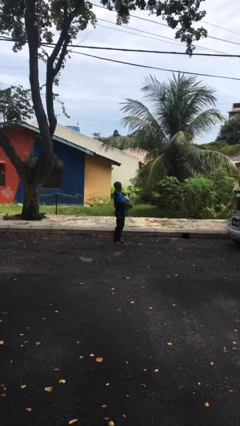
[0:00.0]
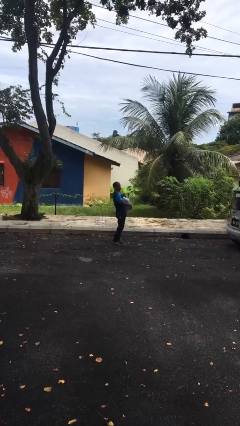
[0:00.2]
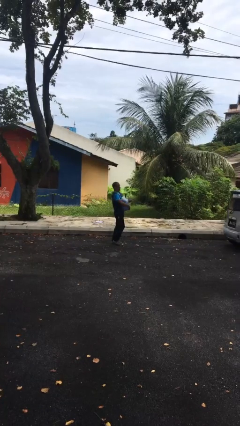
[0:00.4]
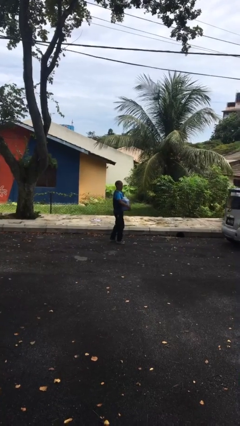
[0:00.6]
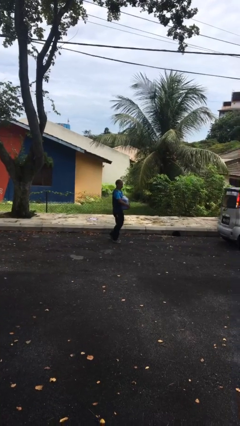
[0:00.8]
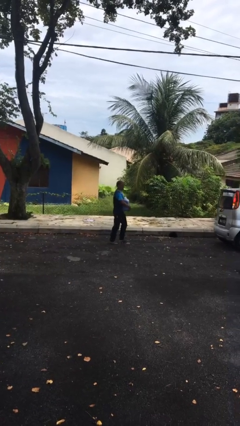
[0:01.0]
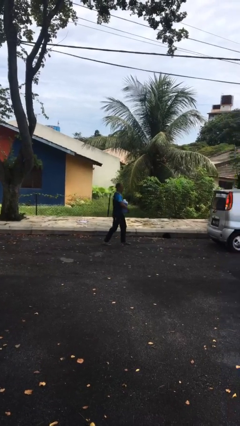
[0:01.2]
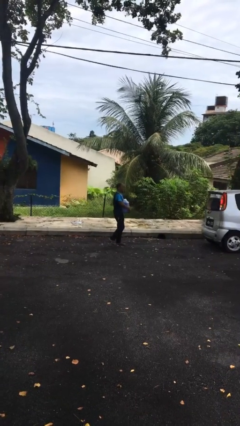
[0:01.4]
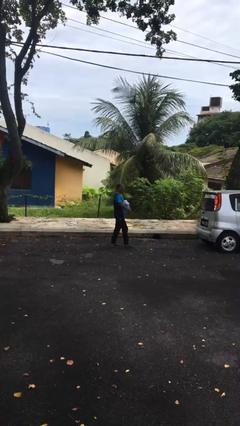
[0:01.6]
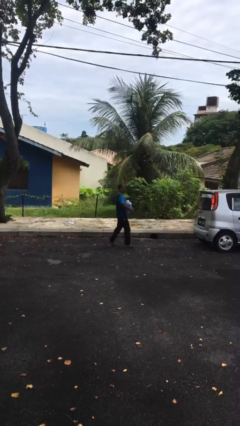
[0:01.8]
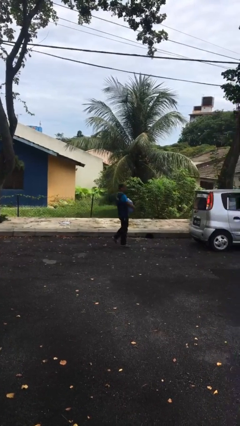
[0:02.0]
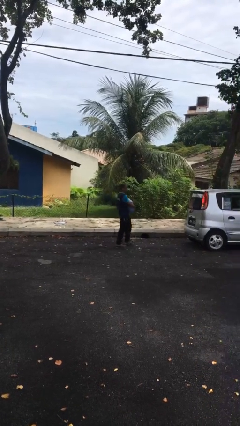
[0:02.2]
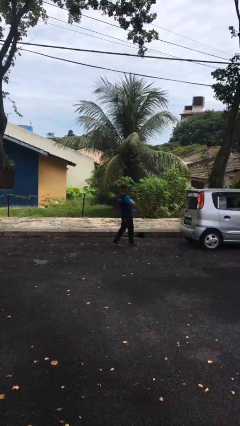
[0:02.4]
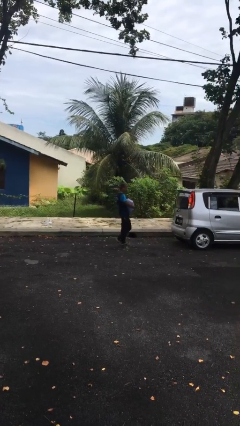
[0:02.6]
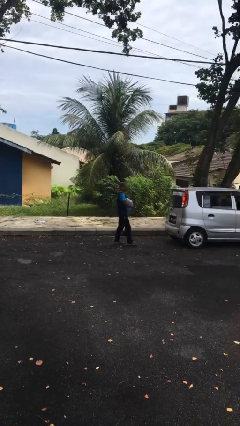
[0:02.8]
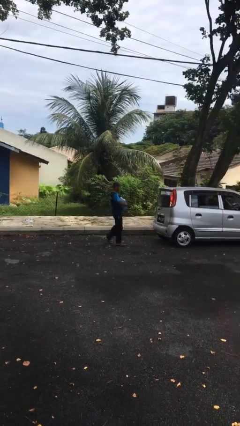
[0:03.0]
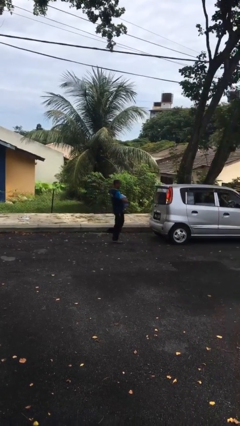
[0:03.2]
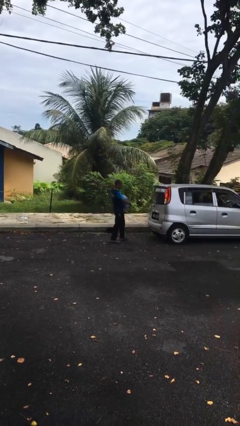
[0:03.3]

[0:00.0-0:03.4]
person carries heavy object

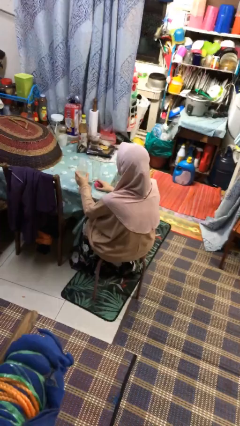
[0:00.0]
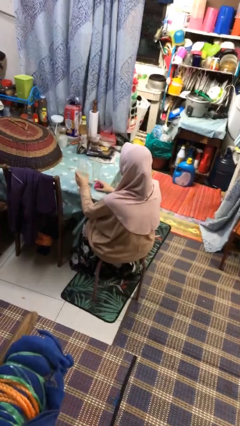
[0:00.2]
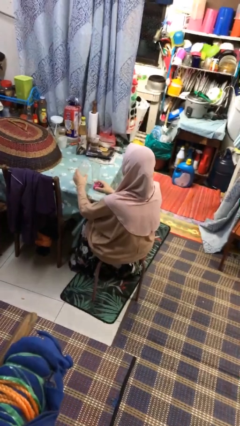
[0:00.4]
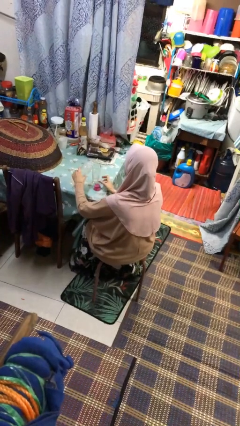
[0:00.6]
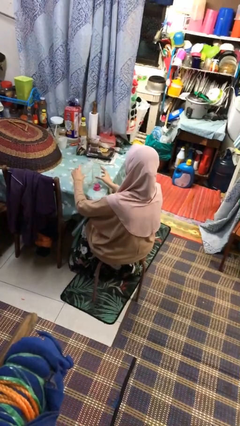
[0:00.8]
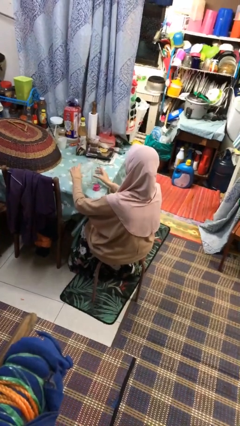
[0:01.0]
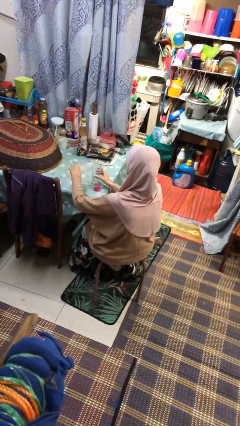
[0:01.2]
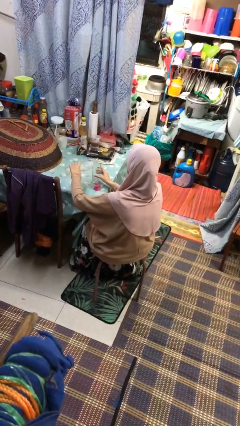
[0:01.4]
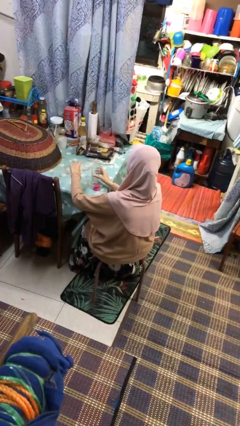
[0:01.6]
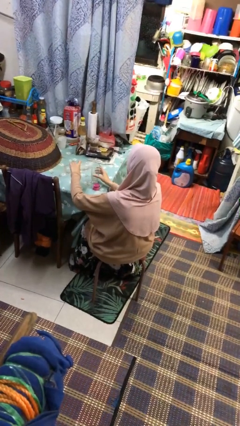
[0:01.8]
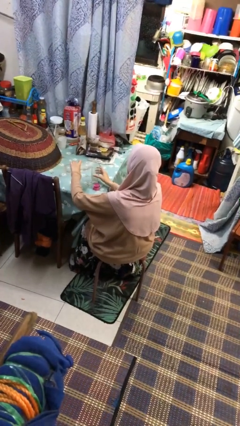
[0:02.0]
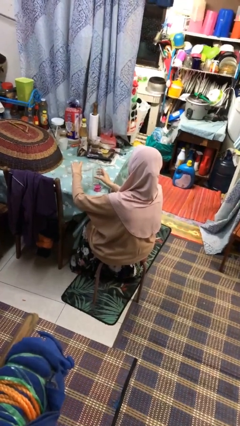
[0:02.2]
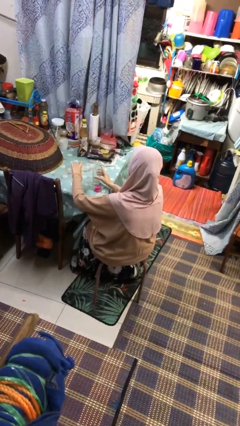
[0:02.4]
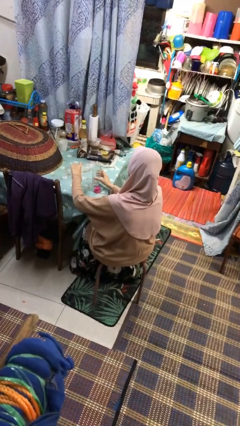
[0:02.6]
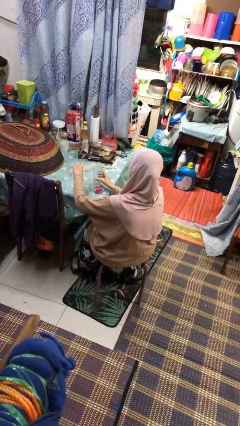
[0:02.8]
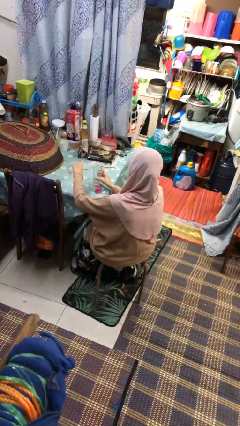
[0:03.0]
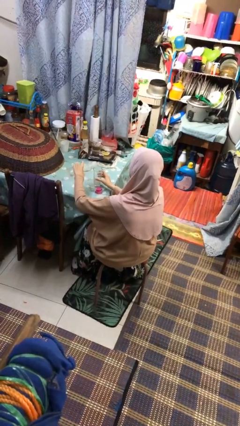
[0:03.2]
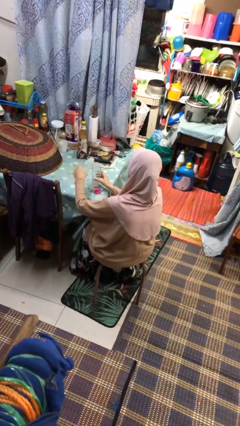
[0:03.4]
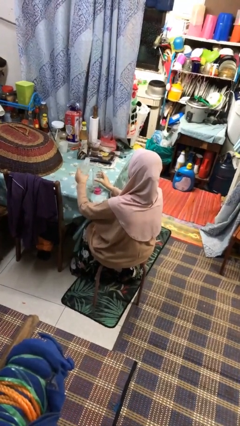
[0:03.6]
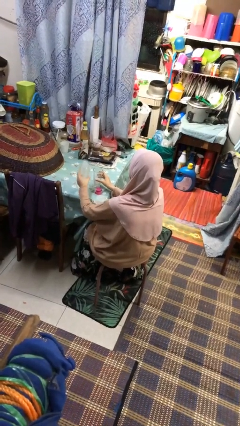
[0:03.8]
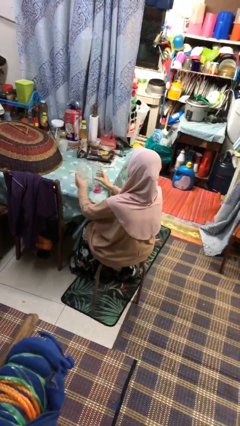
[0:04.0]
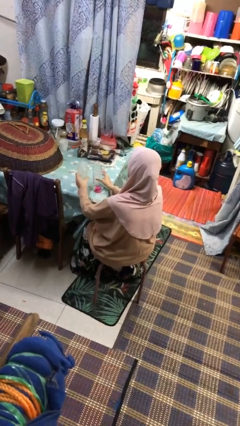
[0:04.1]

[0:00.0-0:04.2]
person pours liquid into cup

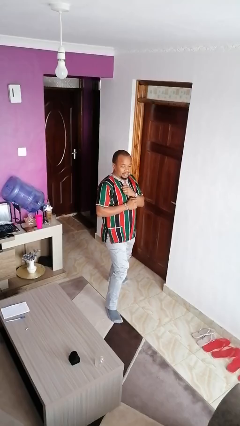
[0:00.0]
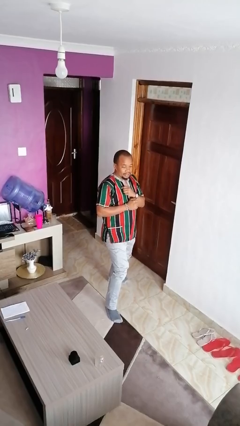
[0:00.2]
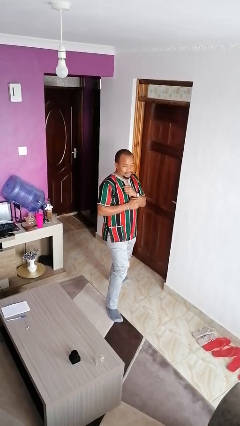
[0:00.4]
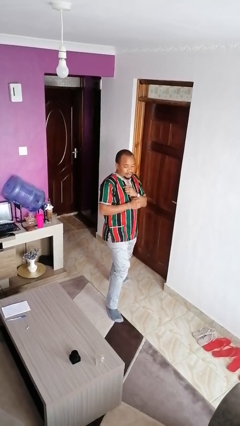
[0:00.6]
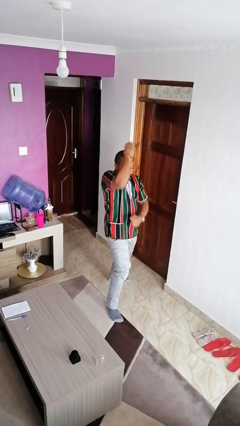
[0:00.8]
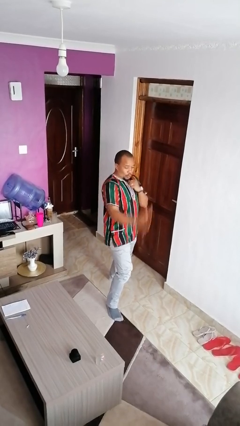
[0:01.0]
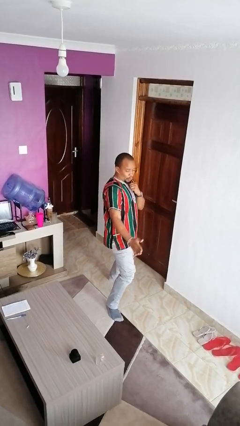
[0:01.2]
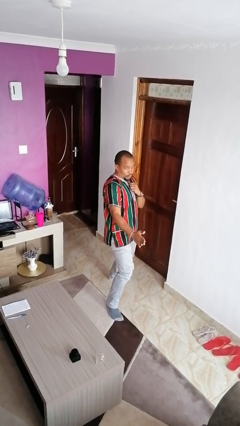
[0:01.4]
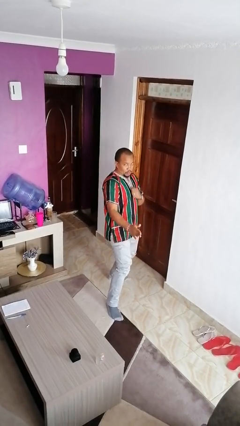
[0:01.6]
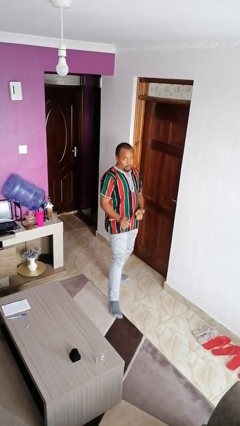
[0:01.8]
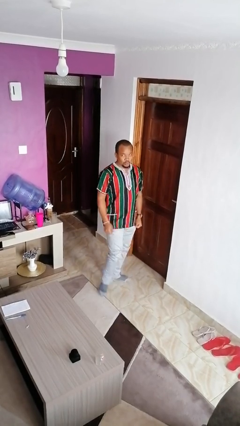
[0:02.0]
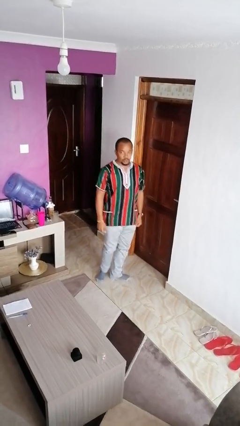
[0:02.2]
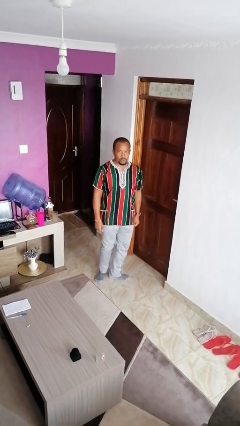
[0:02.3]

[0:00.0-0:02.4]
person karate chop

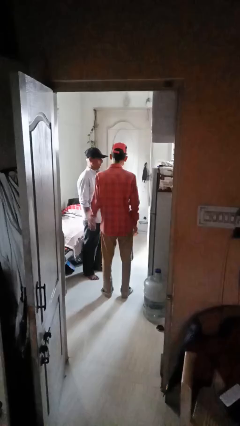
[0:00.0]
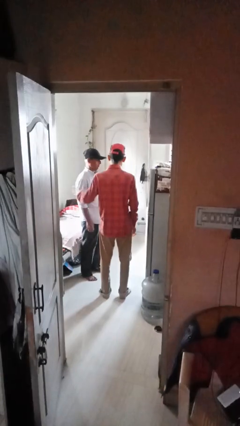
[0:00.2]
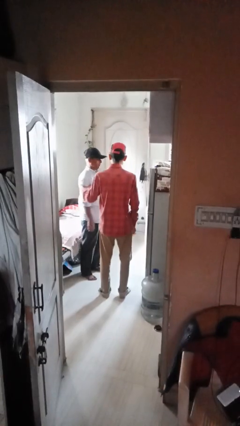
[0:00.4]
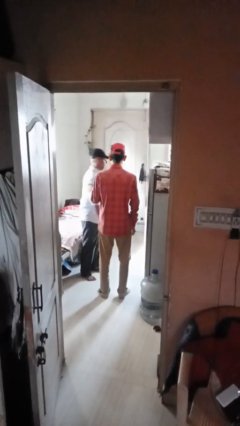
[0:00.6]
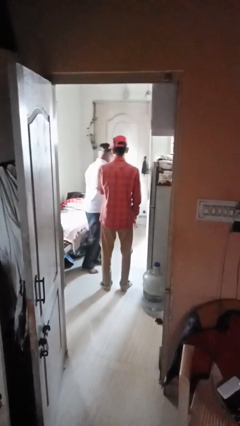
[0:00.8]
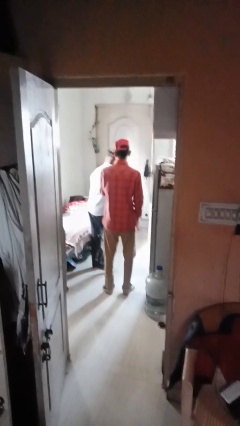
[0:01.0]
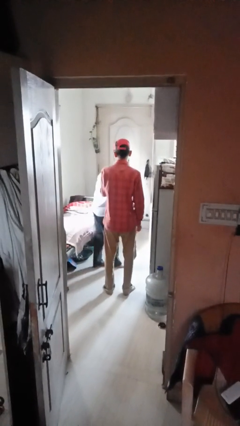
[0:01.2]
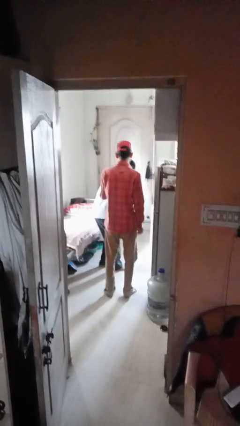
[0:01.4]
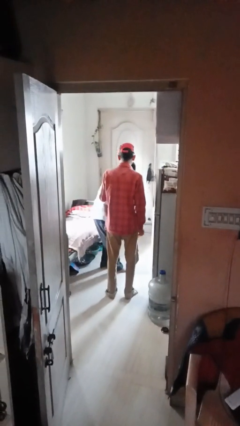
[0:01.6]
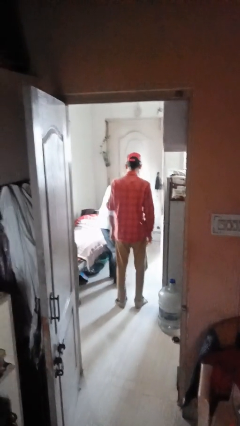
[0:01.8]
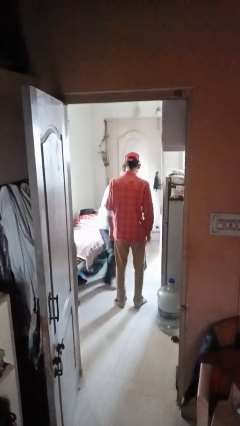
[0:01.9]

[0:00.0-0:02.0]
person shoves person

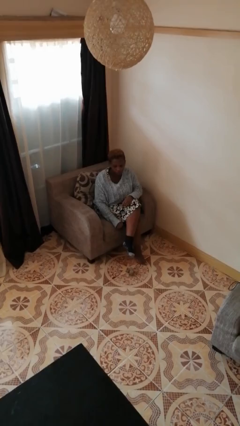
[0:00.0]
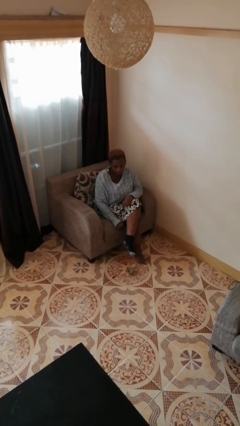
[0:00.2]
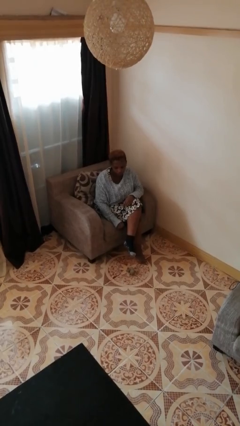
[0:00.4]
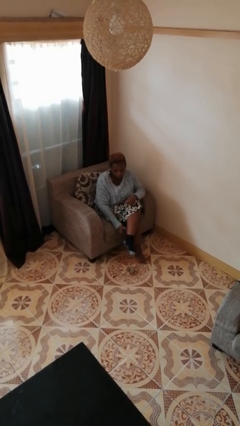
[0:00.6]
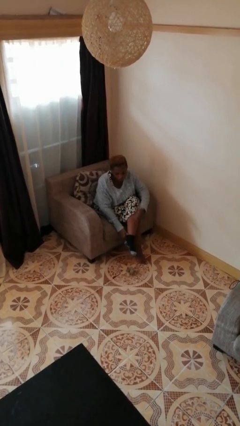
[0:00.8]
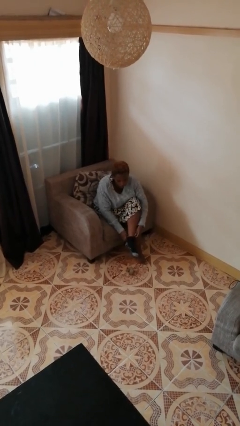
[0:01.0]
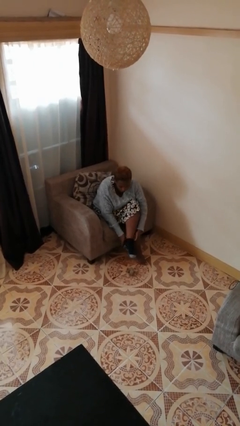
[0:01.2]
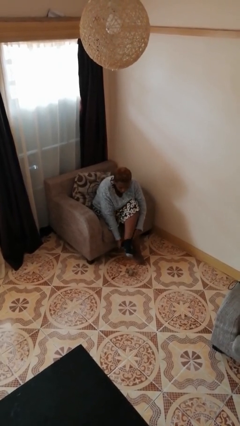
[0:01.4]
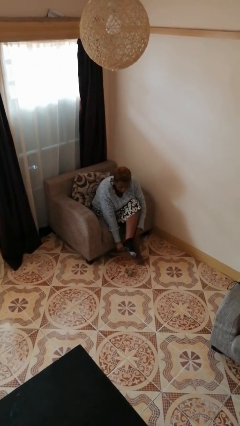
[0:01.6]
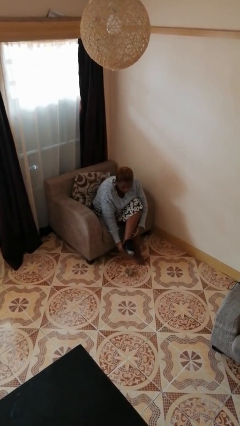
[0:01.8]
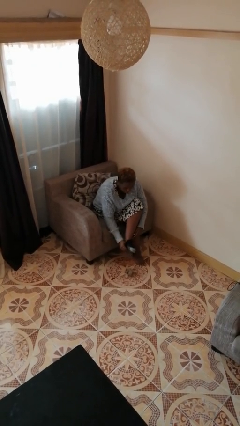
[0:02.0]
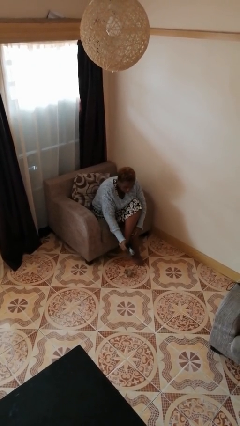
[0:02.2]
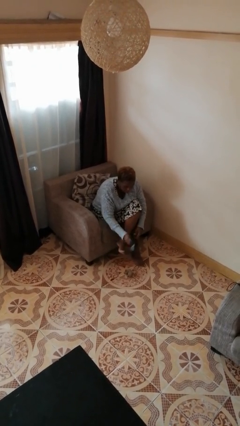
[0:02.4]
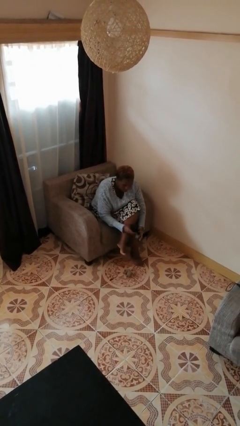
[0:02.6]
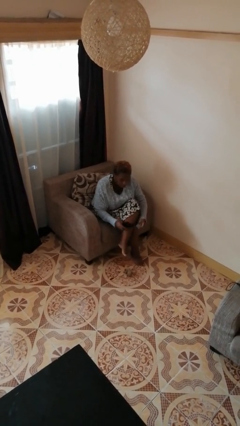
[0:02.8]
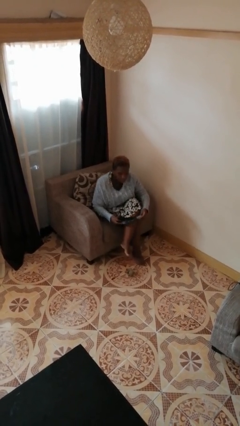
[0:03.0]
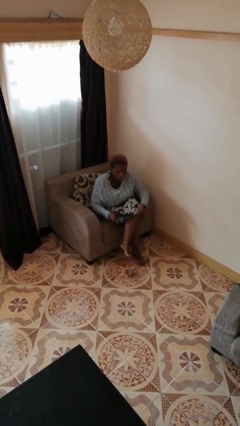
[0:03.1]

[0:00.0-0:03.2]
person takes off socks

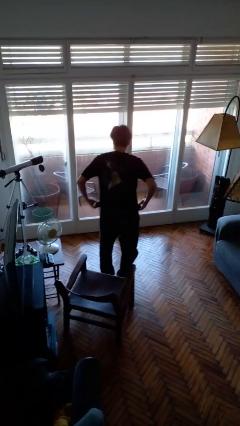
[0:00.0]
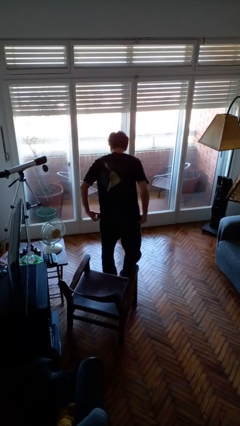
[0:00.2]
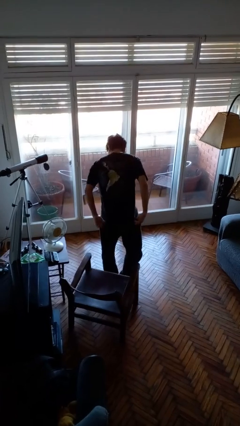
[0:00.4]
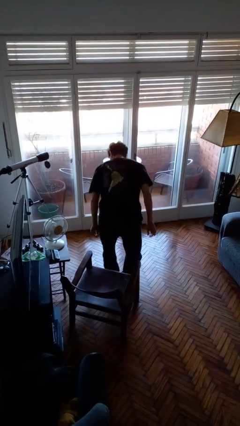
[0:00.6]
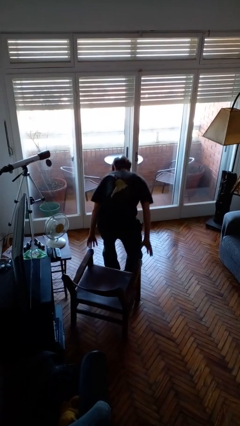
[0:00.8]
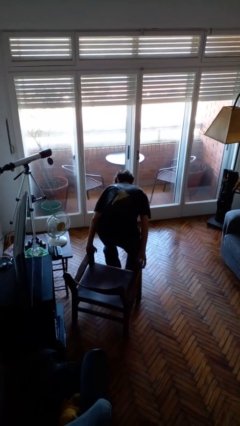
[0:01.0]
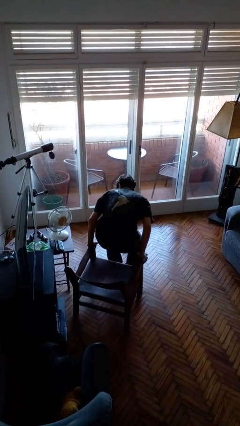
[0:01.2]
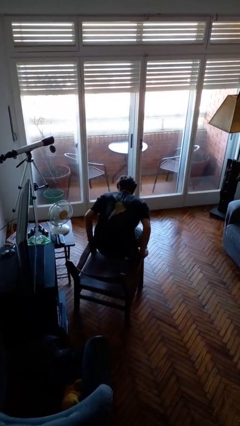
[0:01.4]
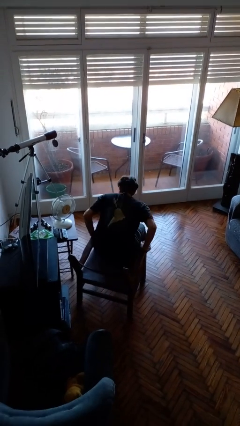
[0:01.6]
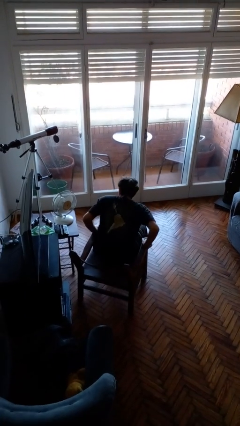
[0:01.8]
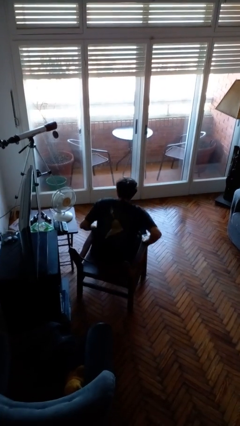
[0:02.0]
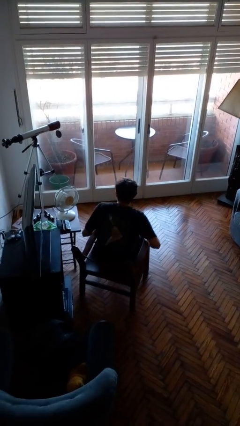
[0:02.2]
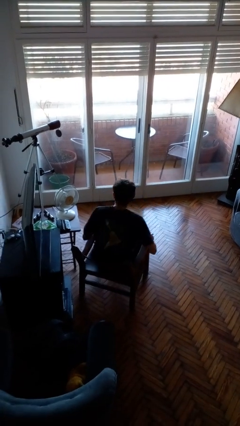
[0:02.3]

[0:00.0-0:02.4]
person sits down
